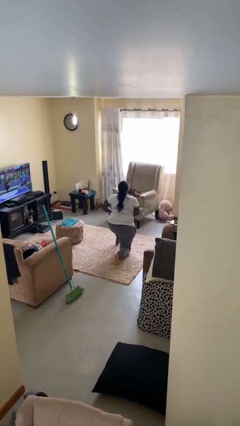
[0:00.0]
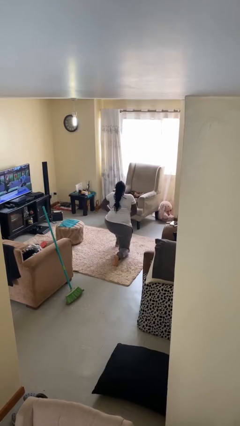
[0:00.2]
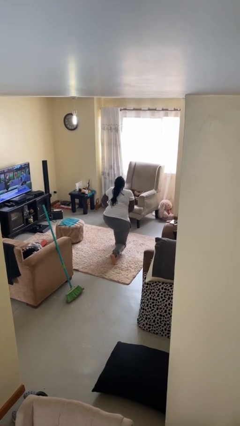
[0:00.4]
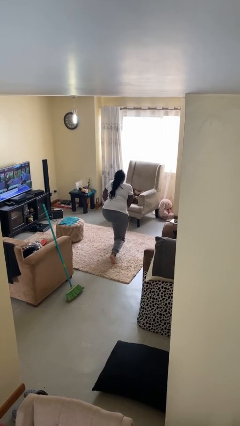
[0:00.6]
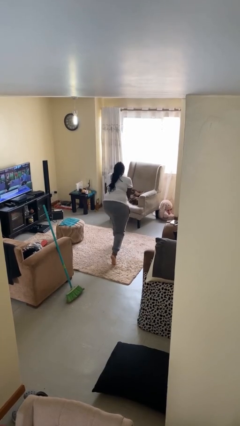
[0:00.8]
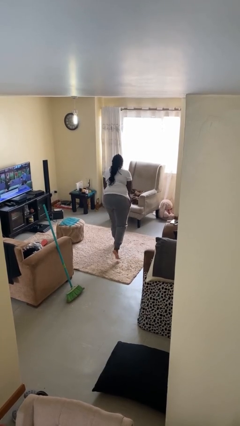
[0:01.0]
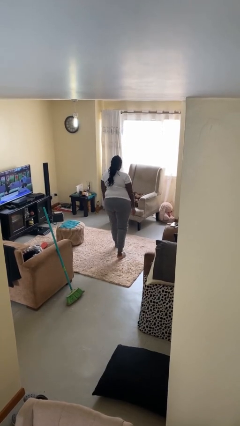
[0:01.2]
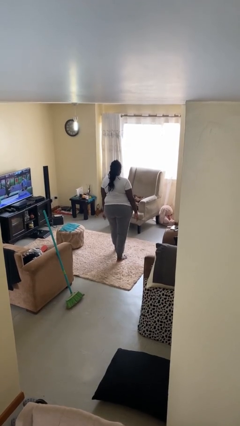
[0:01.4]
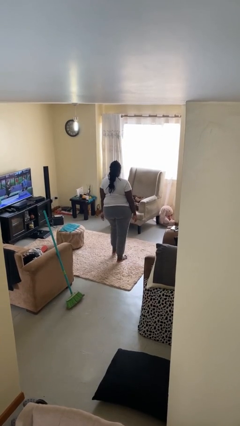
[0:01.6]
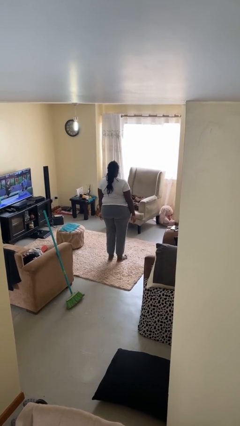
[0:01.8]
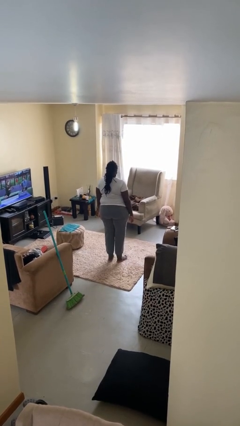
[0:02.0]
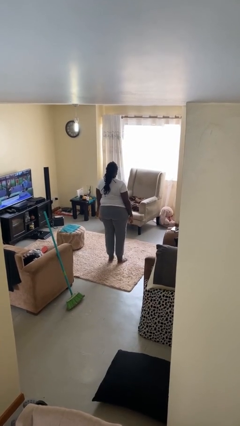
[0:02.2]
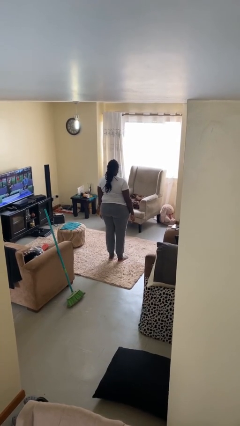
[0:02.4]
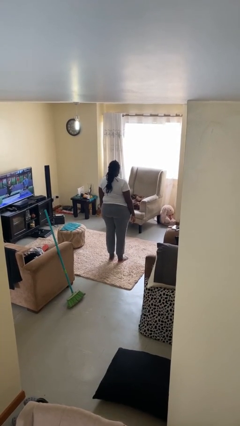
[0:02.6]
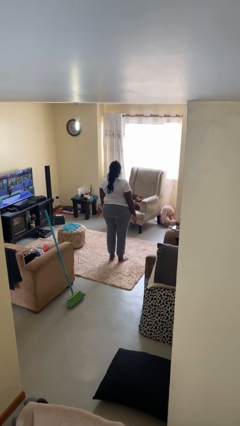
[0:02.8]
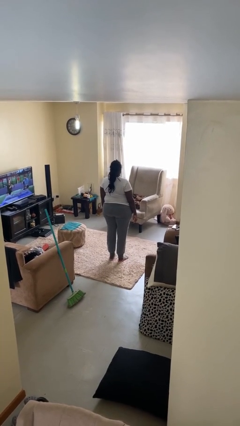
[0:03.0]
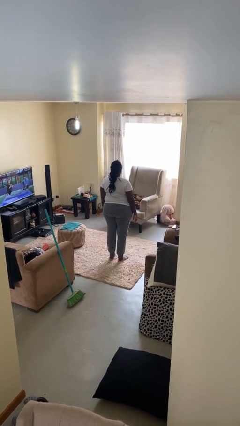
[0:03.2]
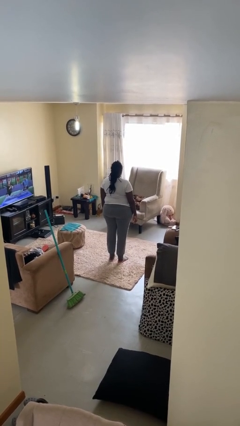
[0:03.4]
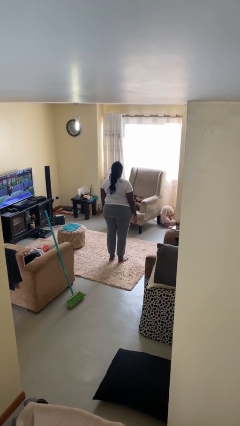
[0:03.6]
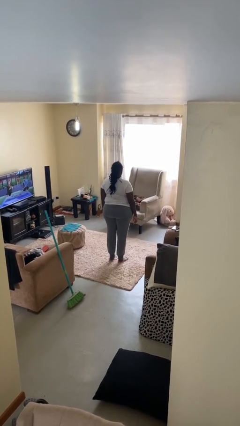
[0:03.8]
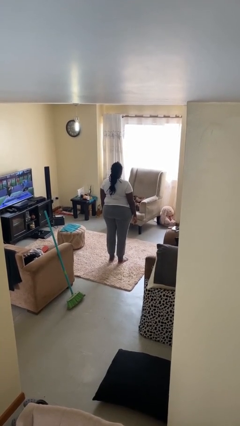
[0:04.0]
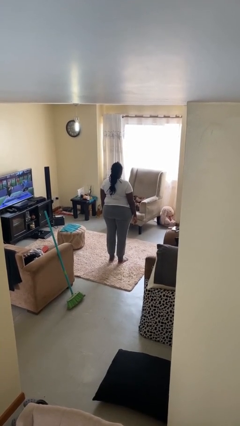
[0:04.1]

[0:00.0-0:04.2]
person stands up from floor

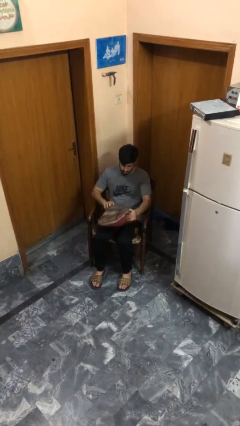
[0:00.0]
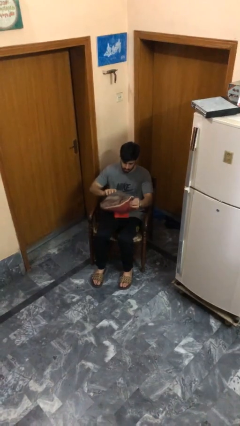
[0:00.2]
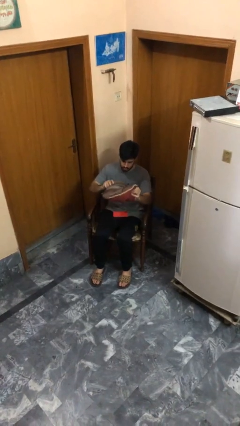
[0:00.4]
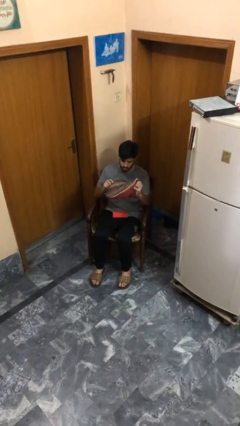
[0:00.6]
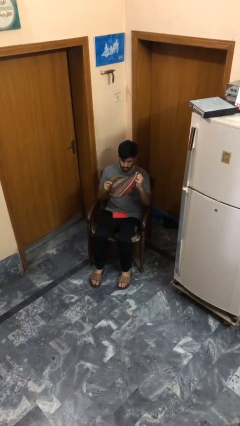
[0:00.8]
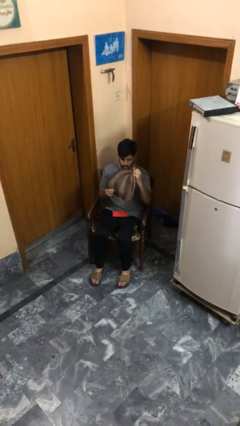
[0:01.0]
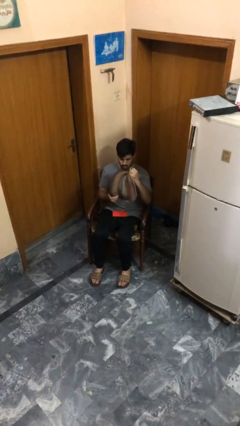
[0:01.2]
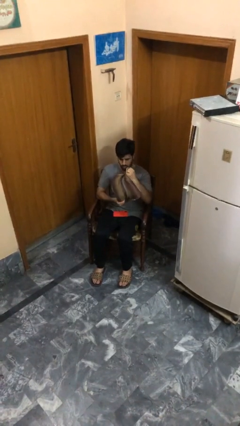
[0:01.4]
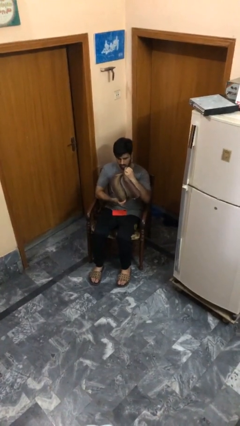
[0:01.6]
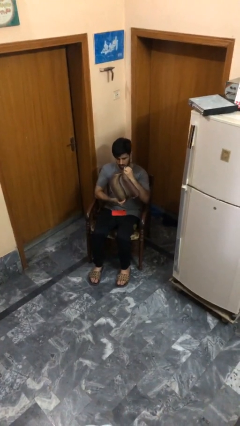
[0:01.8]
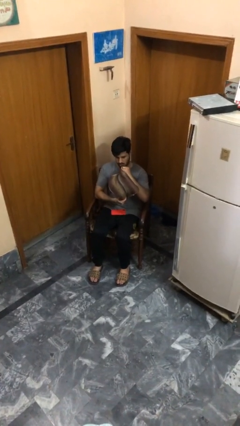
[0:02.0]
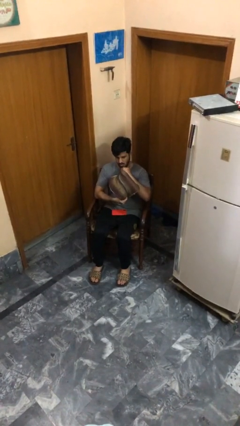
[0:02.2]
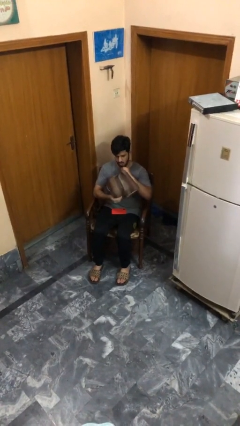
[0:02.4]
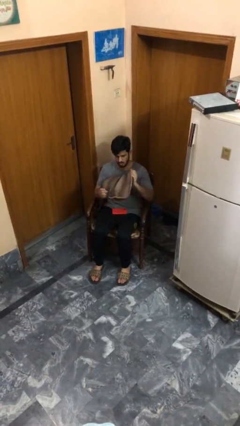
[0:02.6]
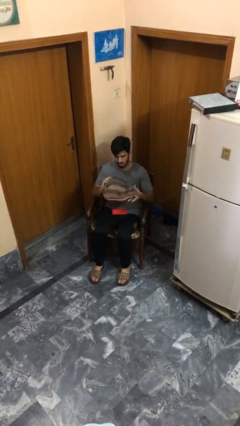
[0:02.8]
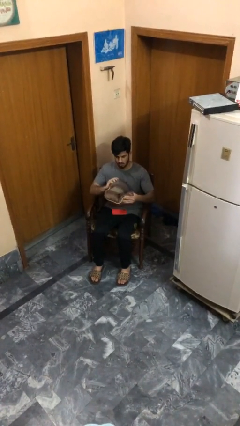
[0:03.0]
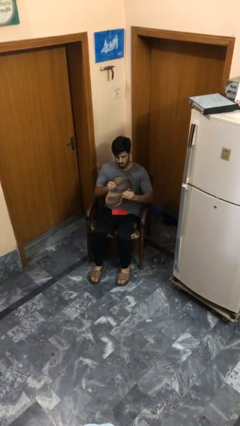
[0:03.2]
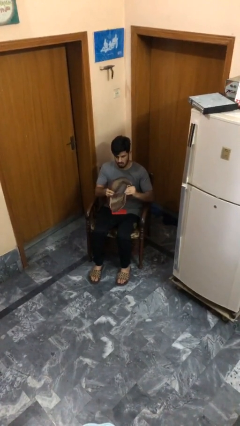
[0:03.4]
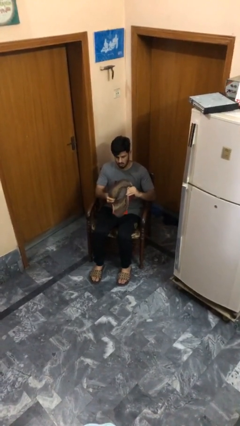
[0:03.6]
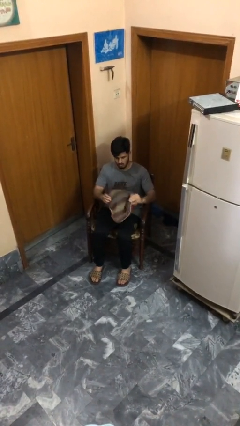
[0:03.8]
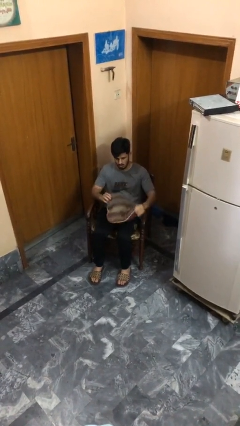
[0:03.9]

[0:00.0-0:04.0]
person squeezes object

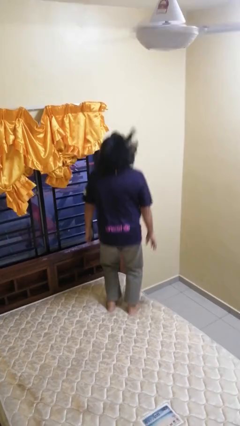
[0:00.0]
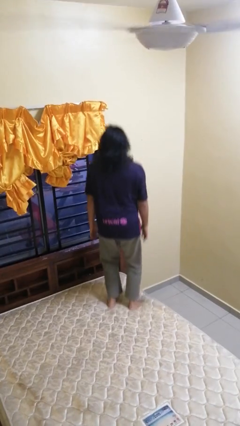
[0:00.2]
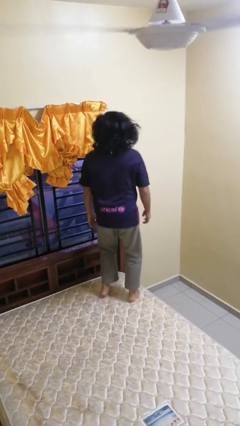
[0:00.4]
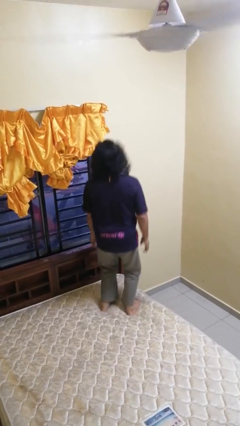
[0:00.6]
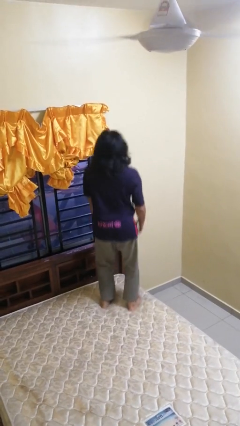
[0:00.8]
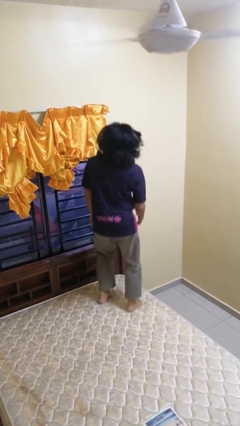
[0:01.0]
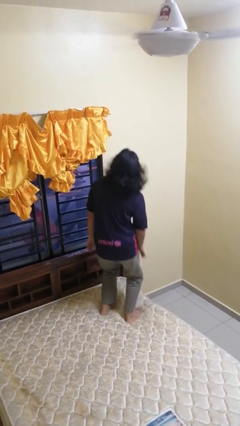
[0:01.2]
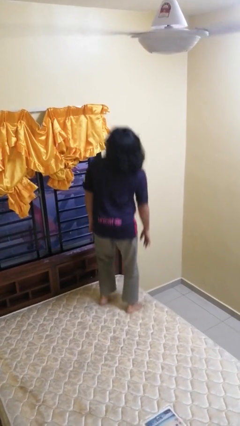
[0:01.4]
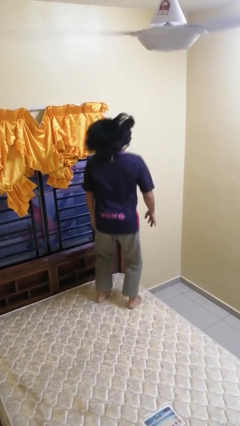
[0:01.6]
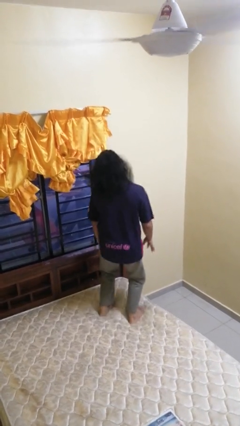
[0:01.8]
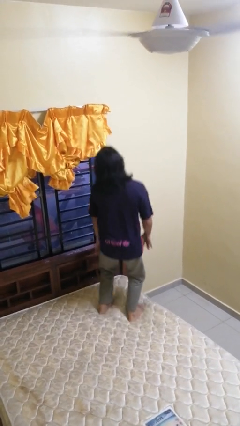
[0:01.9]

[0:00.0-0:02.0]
person jumps on bed

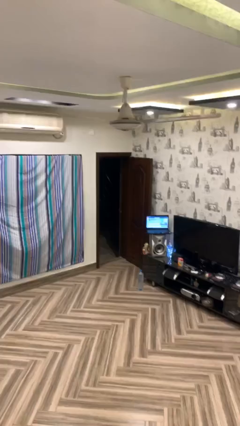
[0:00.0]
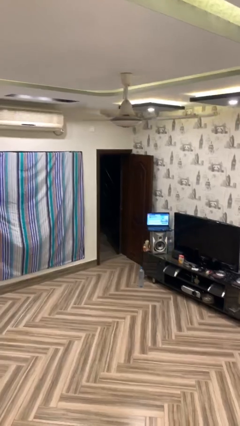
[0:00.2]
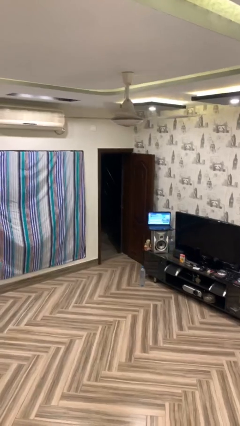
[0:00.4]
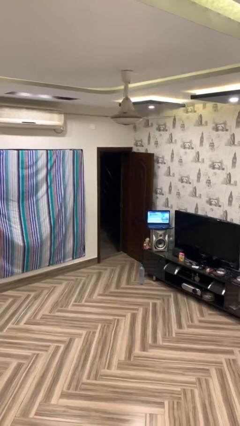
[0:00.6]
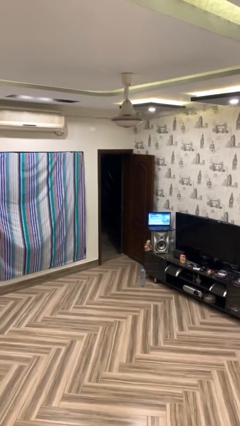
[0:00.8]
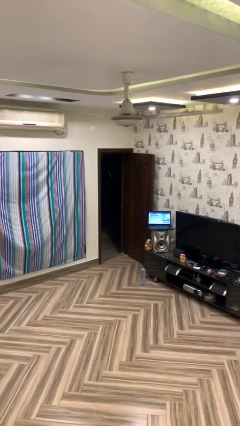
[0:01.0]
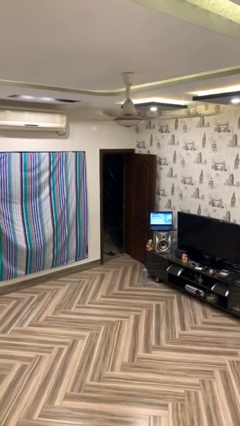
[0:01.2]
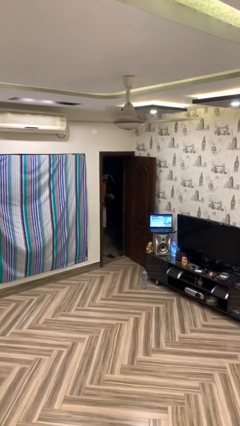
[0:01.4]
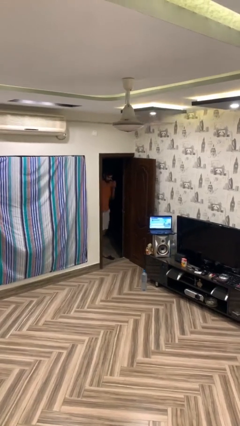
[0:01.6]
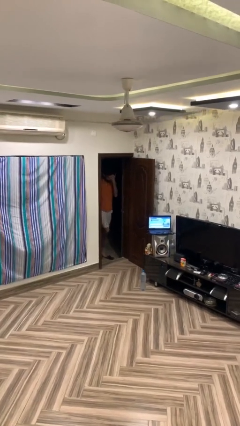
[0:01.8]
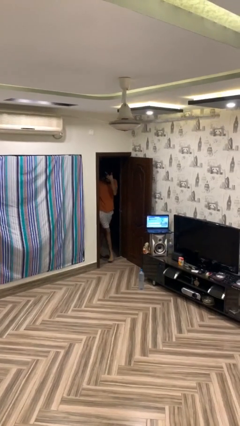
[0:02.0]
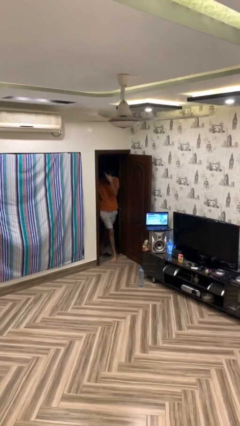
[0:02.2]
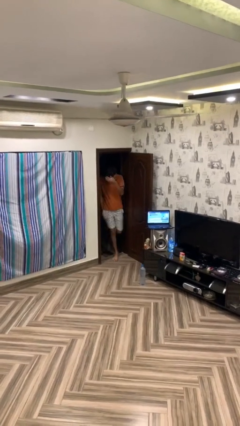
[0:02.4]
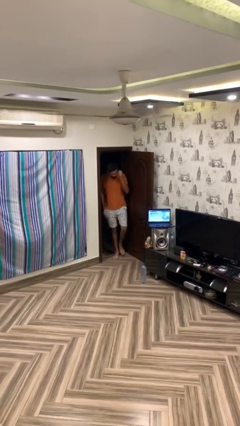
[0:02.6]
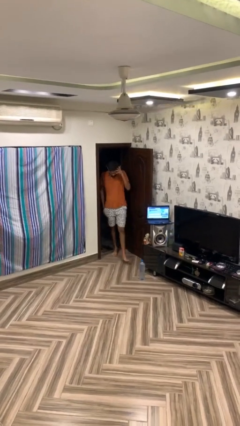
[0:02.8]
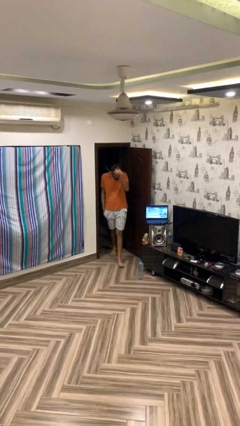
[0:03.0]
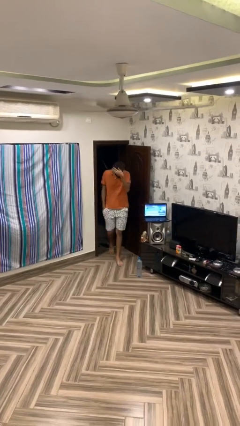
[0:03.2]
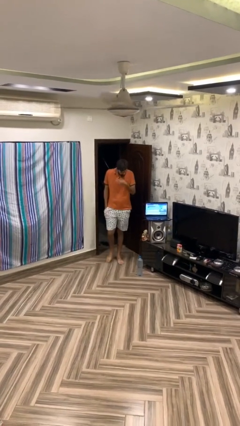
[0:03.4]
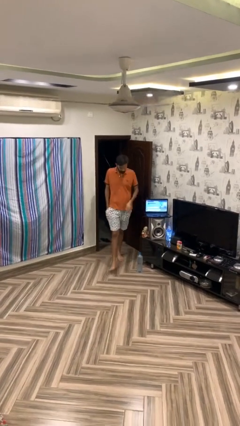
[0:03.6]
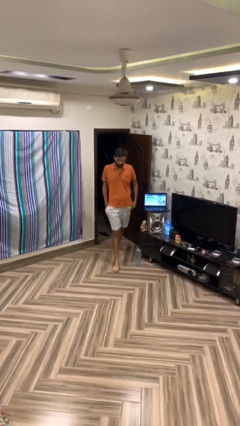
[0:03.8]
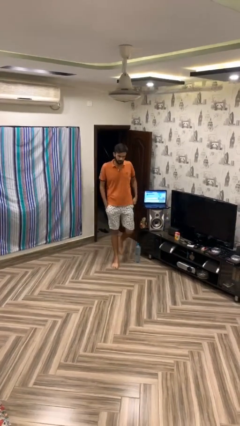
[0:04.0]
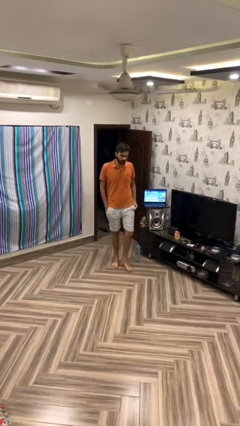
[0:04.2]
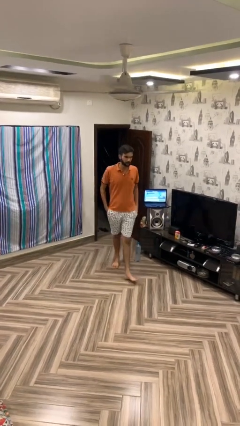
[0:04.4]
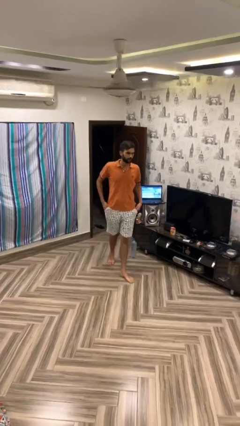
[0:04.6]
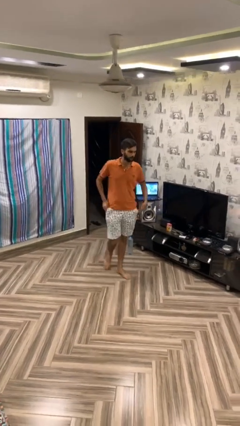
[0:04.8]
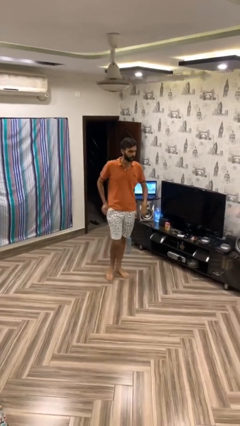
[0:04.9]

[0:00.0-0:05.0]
person enters scene through structure

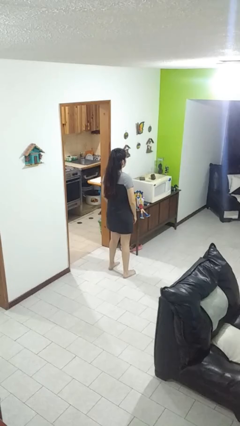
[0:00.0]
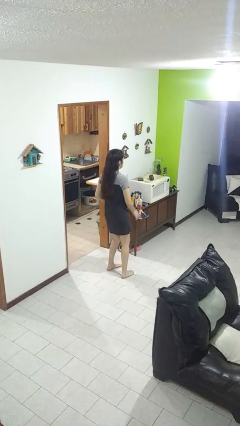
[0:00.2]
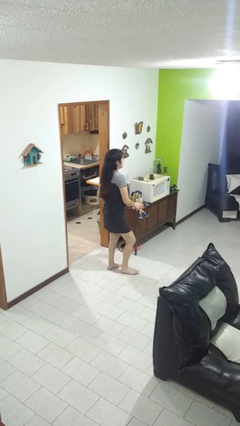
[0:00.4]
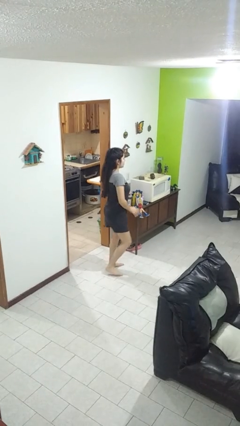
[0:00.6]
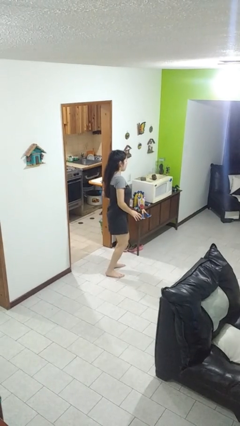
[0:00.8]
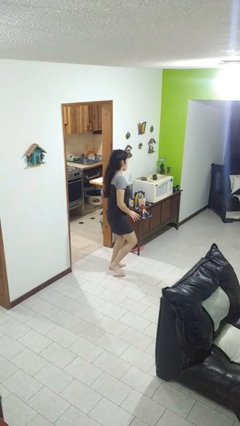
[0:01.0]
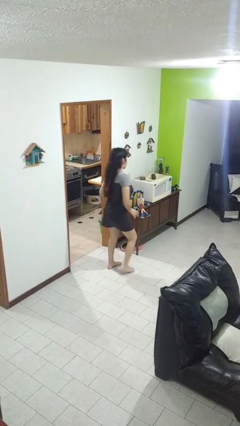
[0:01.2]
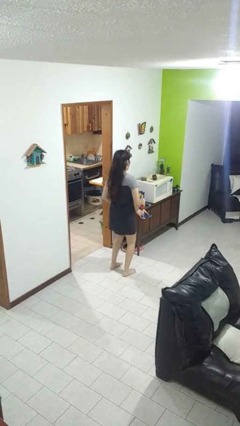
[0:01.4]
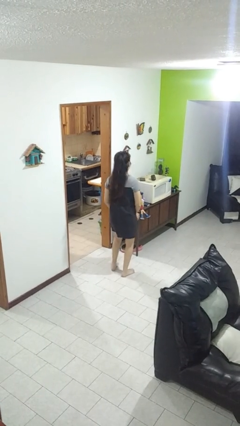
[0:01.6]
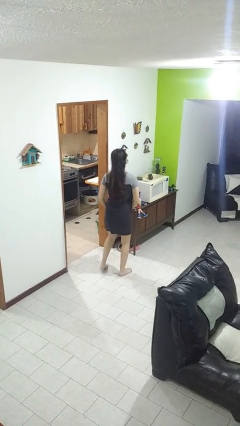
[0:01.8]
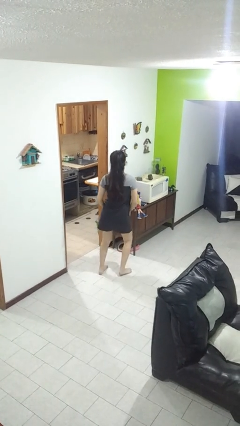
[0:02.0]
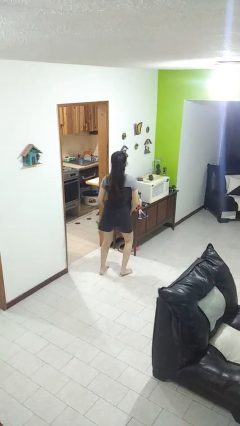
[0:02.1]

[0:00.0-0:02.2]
person dances in place
